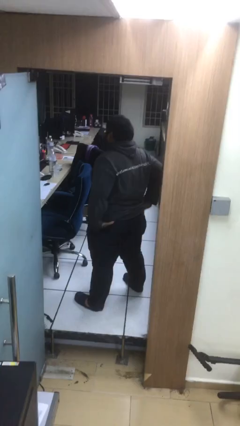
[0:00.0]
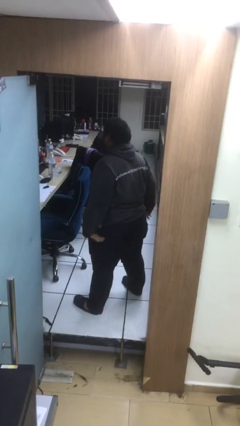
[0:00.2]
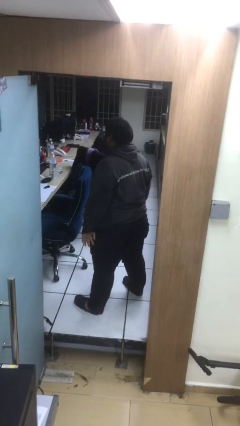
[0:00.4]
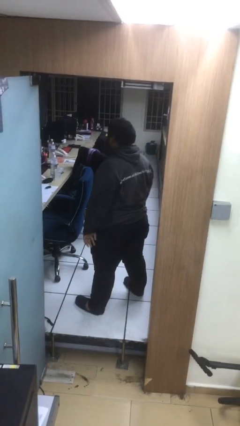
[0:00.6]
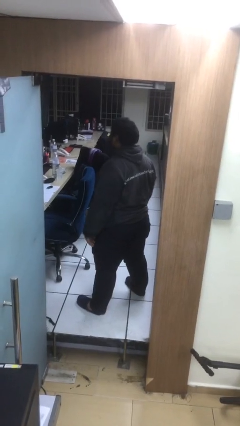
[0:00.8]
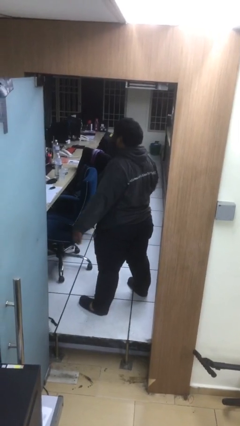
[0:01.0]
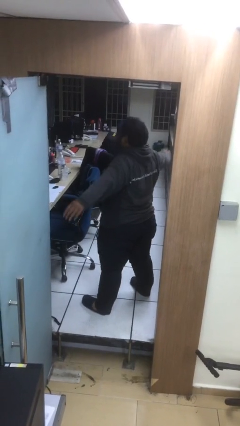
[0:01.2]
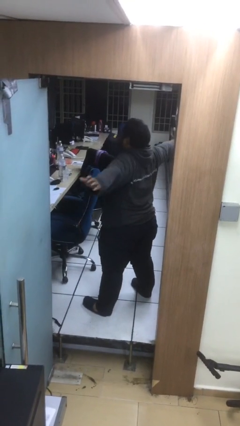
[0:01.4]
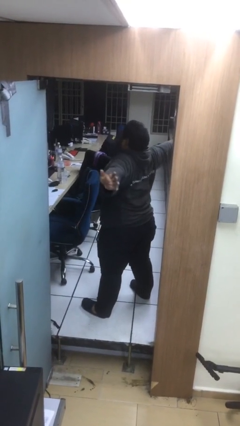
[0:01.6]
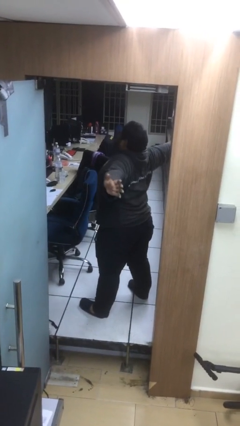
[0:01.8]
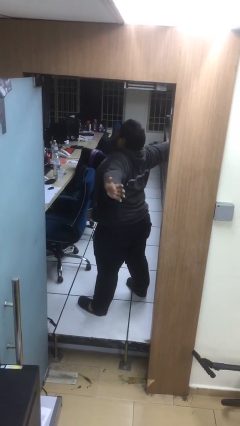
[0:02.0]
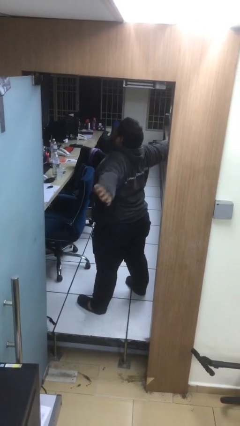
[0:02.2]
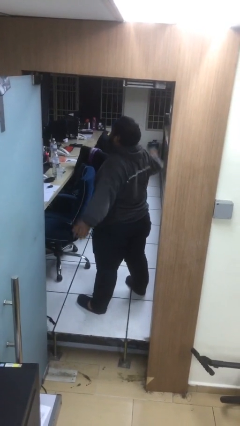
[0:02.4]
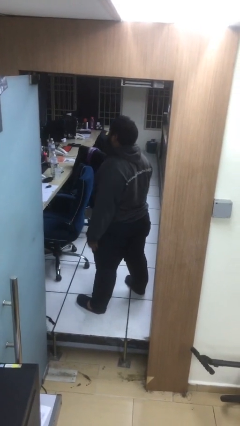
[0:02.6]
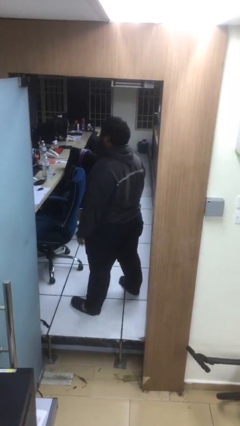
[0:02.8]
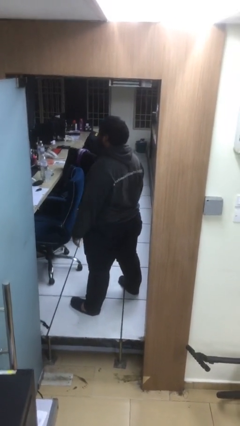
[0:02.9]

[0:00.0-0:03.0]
person stretches arms to side

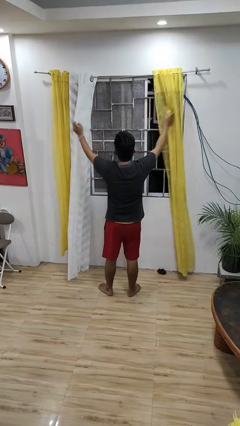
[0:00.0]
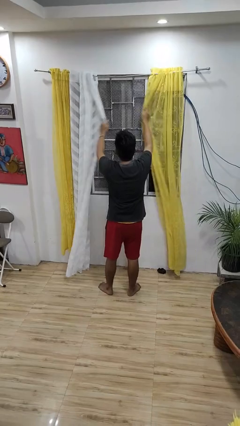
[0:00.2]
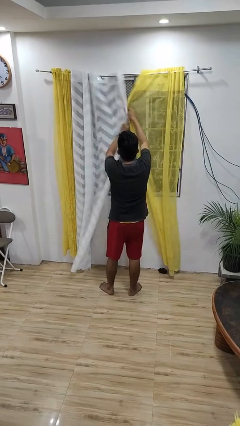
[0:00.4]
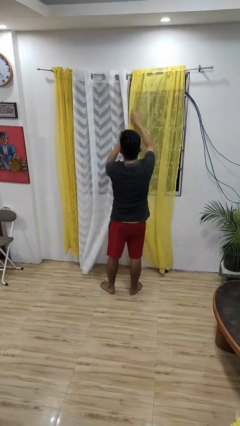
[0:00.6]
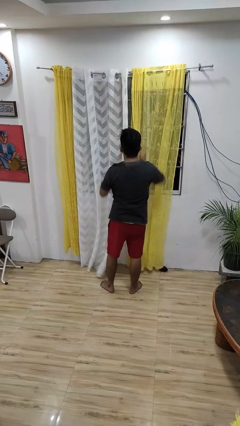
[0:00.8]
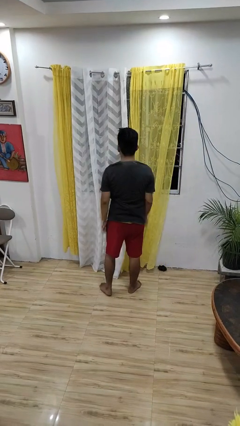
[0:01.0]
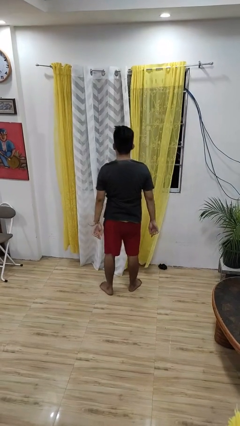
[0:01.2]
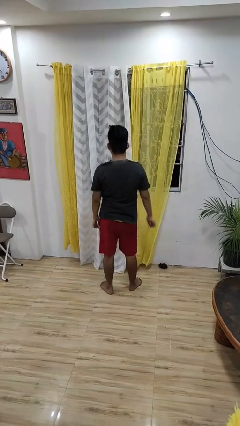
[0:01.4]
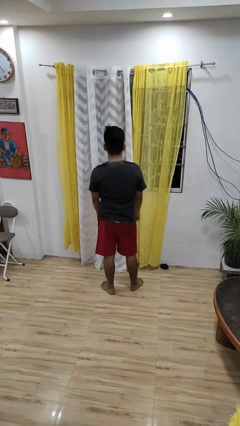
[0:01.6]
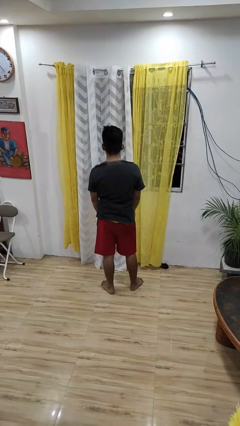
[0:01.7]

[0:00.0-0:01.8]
person closes curtains

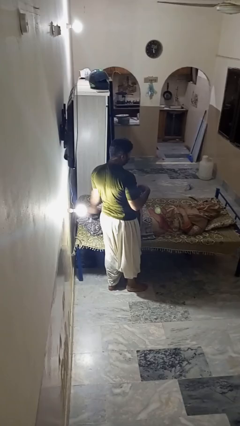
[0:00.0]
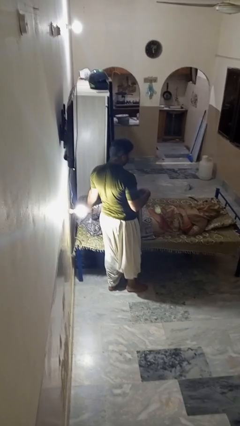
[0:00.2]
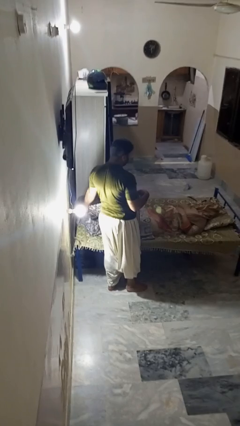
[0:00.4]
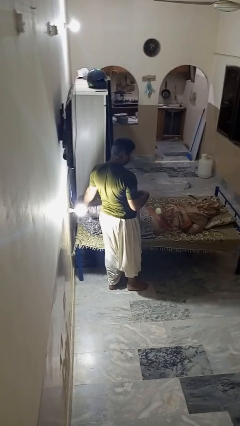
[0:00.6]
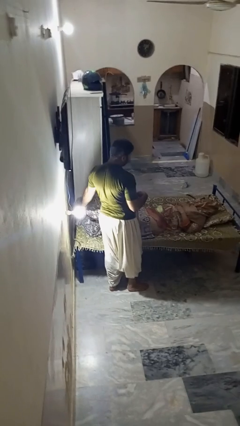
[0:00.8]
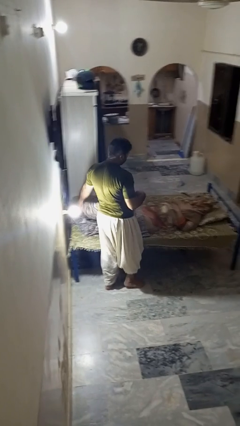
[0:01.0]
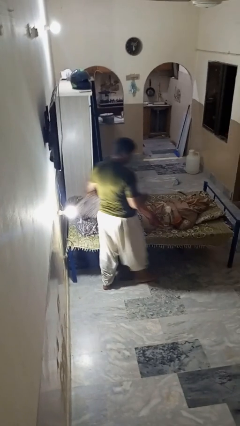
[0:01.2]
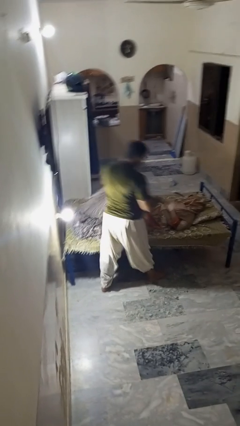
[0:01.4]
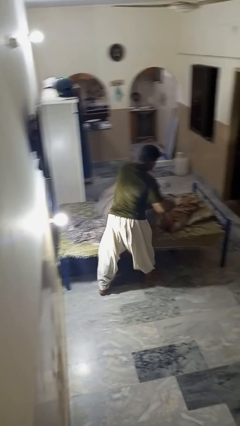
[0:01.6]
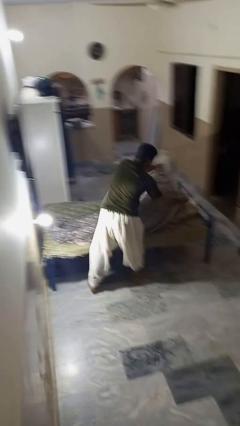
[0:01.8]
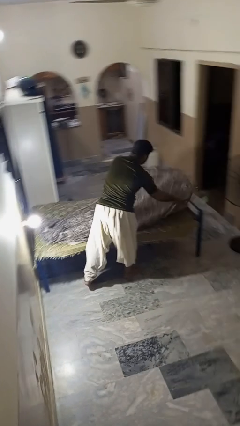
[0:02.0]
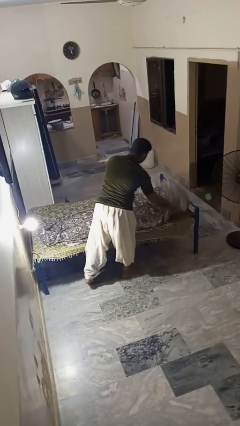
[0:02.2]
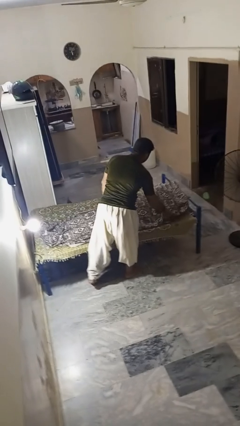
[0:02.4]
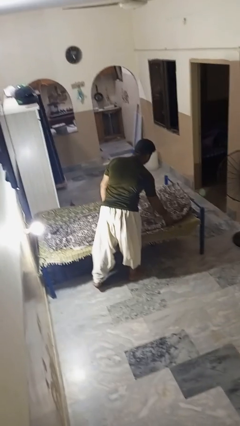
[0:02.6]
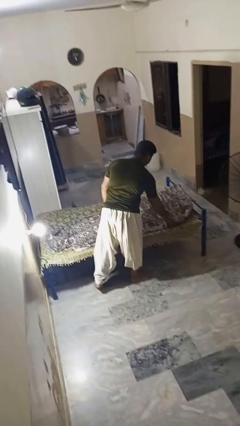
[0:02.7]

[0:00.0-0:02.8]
person covers friend with blanket

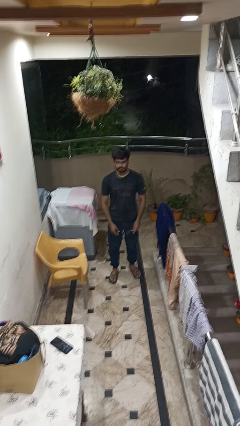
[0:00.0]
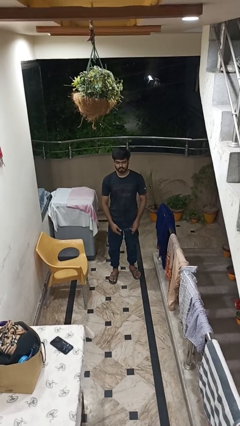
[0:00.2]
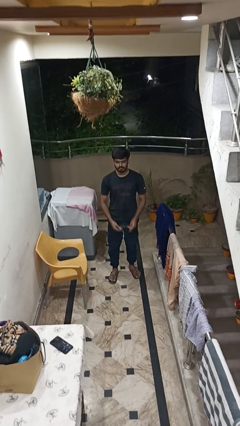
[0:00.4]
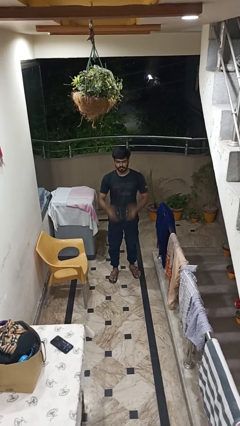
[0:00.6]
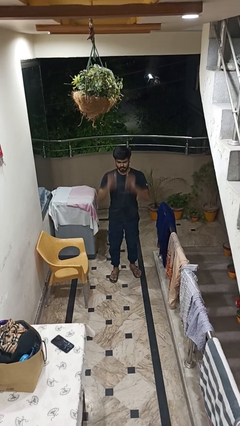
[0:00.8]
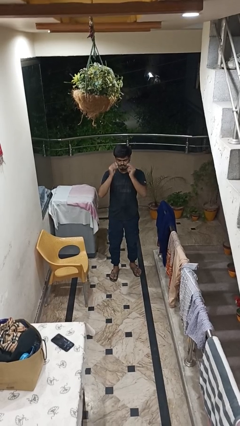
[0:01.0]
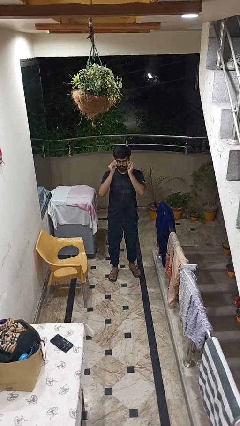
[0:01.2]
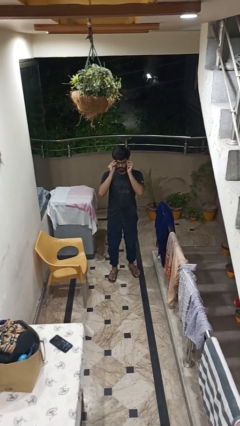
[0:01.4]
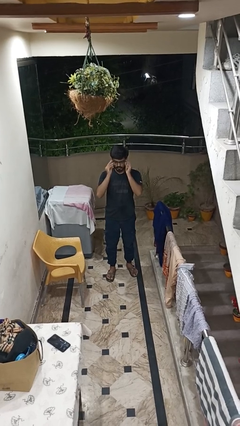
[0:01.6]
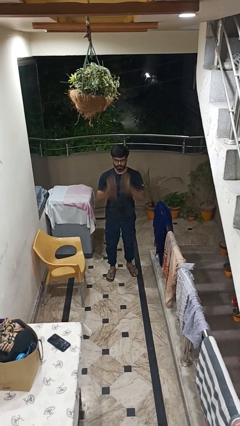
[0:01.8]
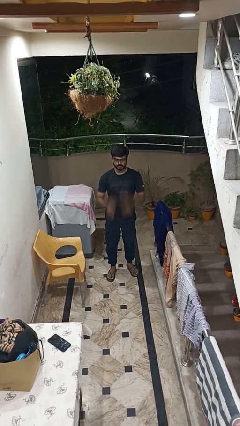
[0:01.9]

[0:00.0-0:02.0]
person puts on glasses

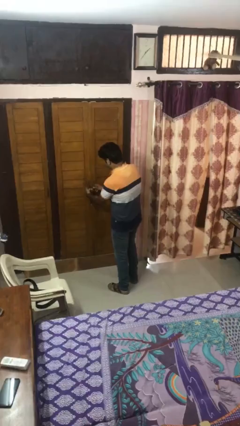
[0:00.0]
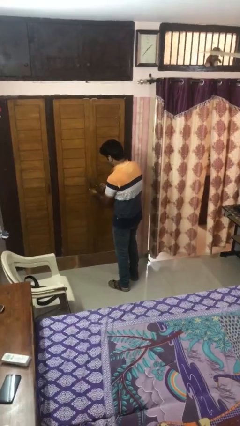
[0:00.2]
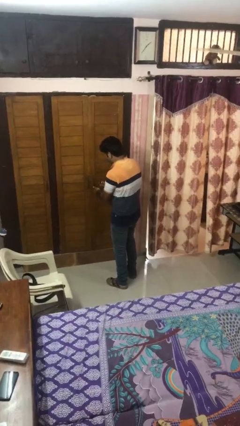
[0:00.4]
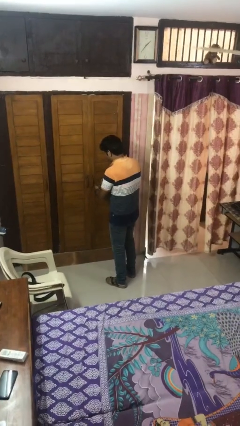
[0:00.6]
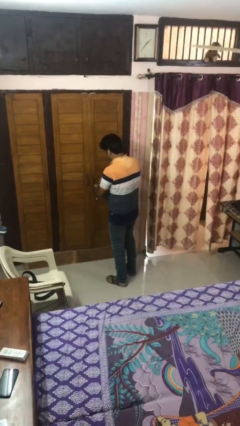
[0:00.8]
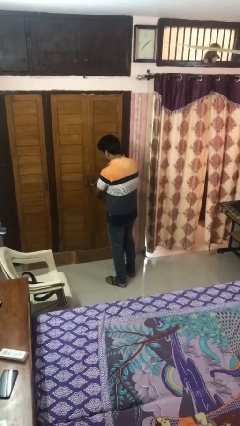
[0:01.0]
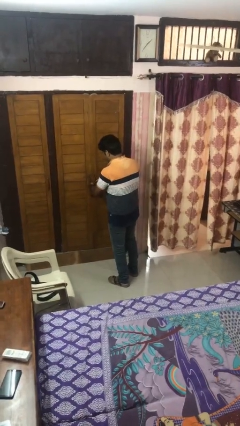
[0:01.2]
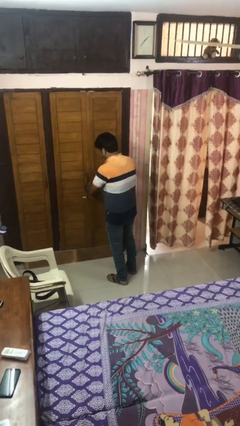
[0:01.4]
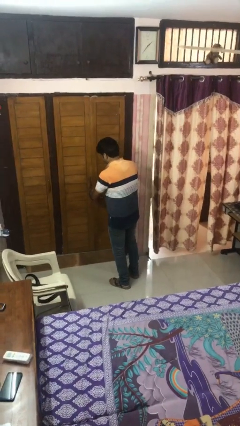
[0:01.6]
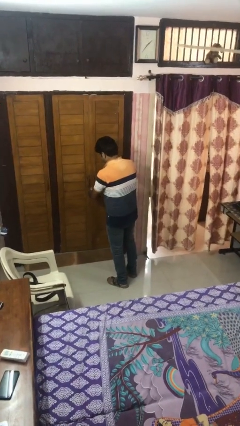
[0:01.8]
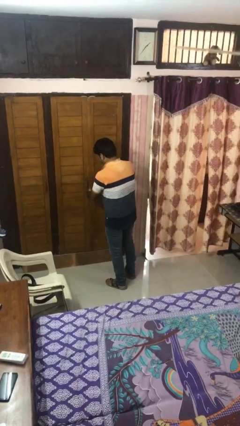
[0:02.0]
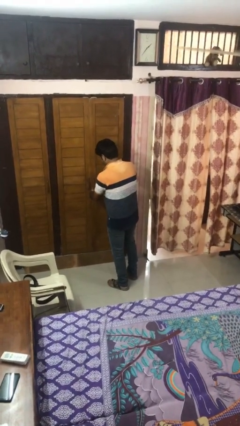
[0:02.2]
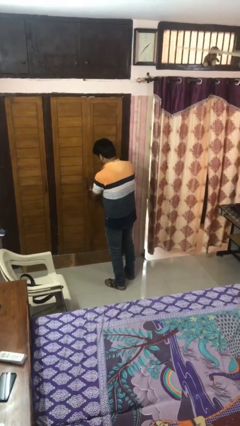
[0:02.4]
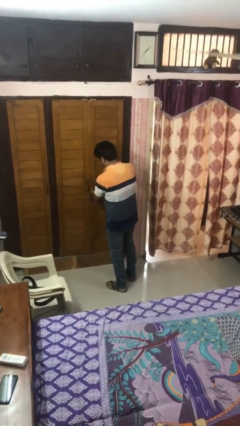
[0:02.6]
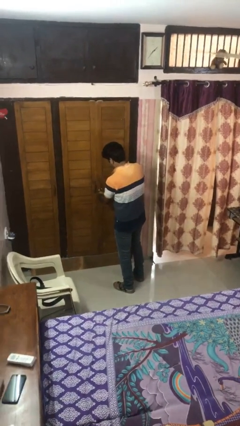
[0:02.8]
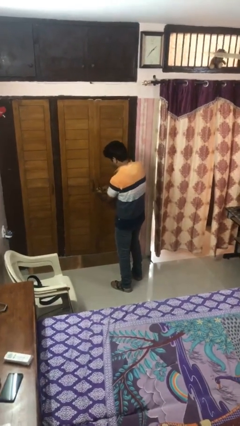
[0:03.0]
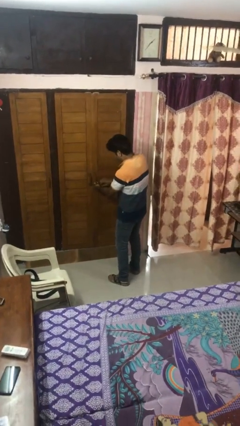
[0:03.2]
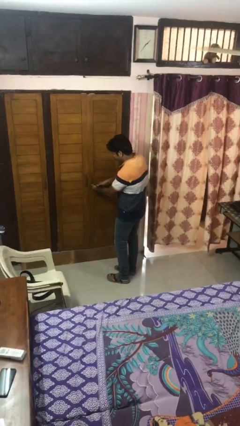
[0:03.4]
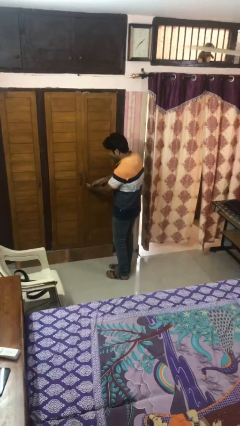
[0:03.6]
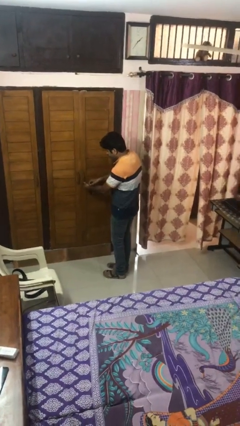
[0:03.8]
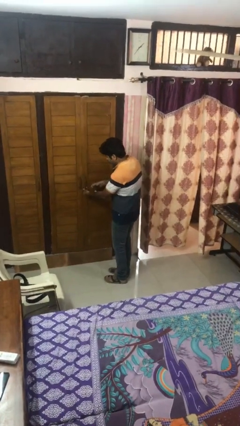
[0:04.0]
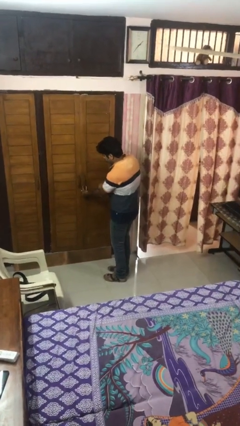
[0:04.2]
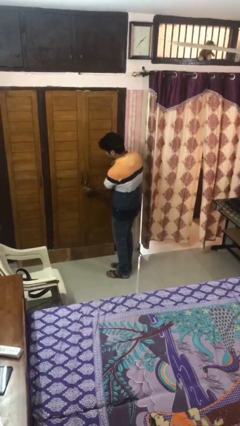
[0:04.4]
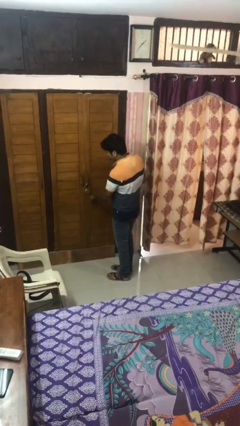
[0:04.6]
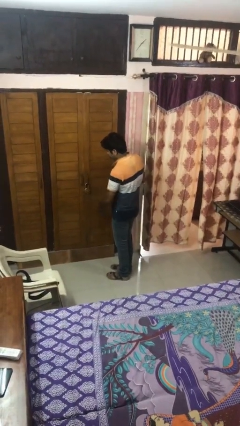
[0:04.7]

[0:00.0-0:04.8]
person locks door with keys

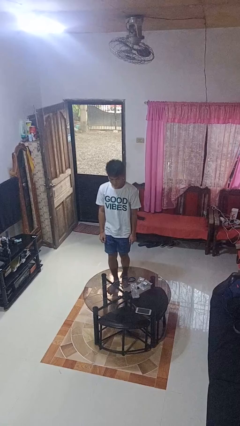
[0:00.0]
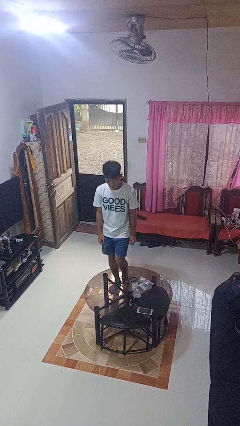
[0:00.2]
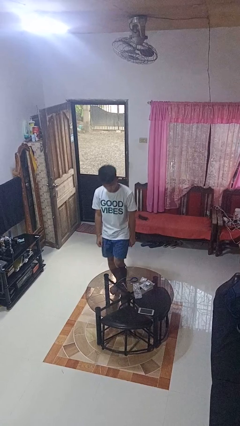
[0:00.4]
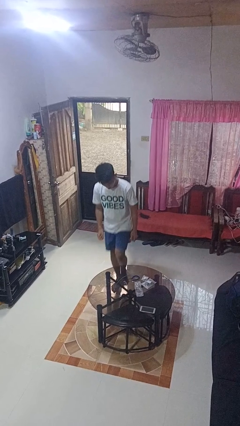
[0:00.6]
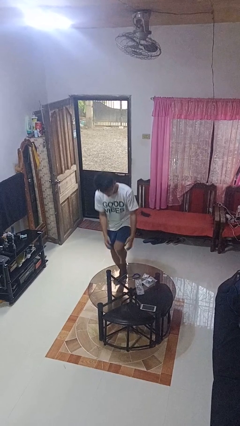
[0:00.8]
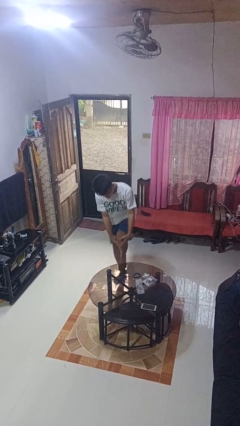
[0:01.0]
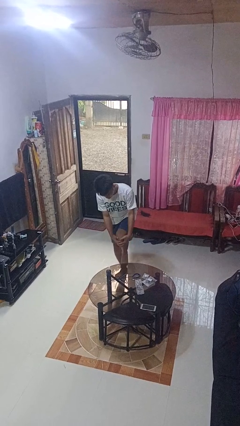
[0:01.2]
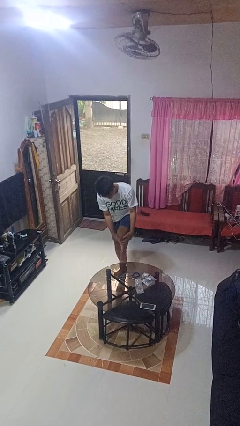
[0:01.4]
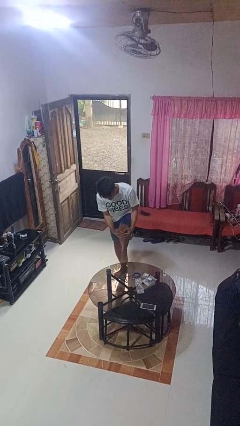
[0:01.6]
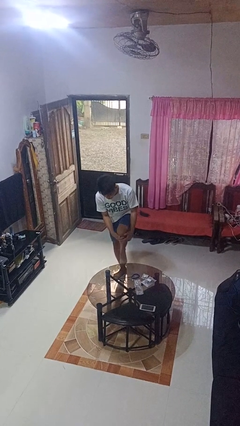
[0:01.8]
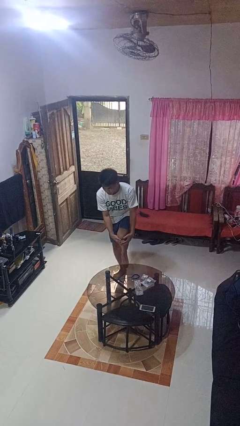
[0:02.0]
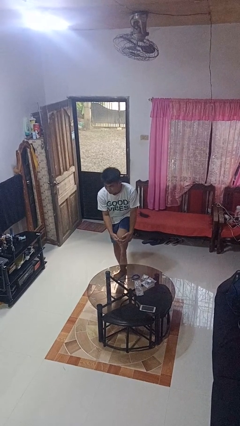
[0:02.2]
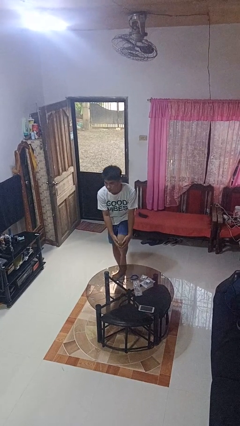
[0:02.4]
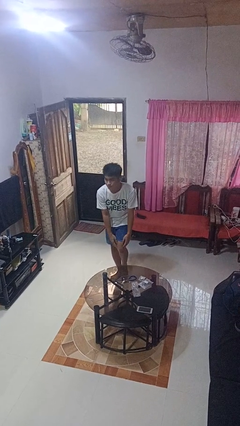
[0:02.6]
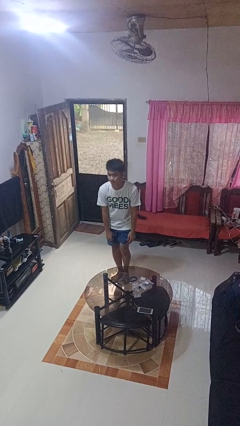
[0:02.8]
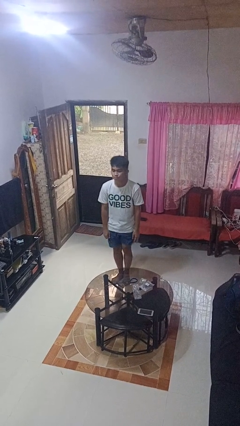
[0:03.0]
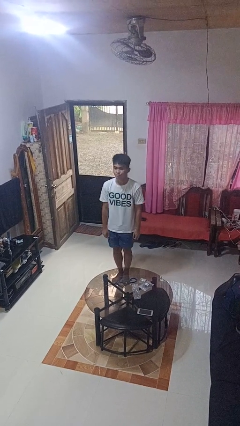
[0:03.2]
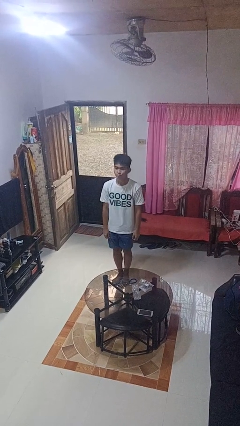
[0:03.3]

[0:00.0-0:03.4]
person bumps into table
